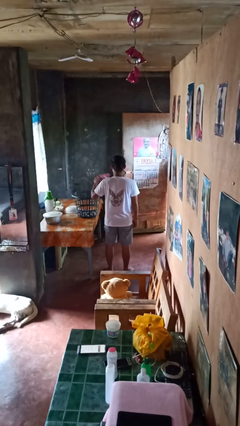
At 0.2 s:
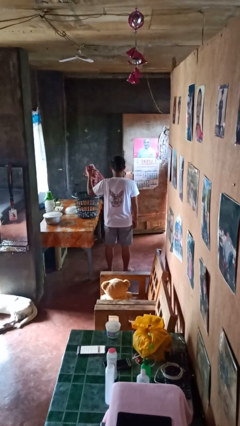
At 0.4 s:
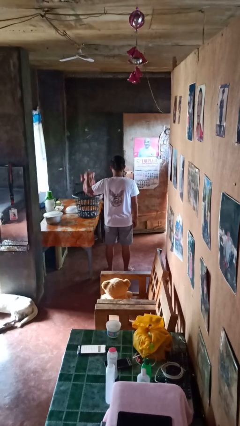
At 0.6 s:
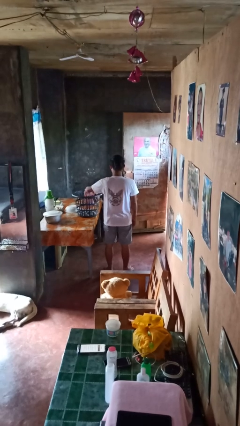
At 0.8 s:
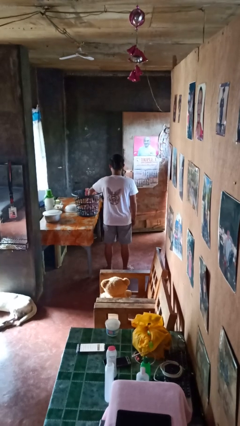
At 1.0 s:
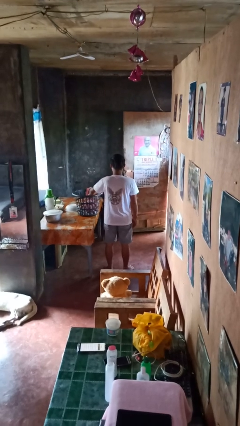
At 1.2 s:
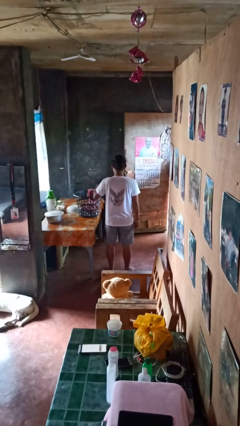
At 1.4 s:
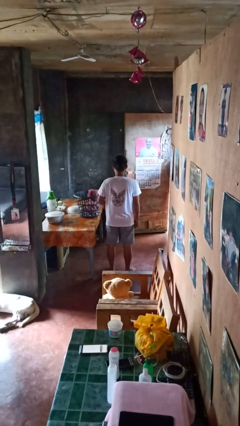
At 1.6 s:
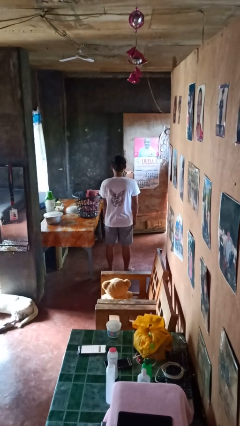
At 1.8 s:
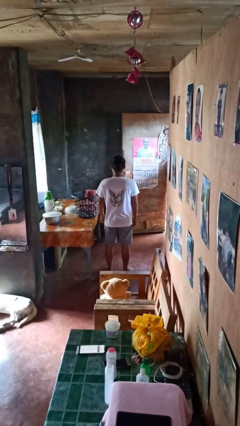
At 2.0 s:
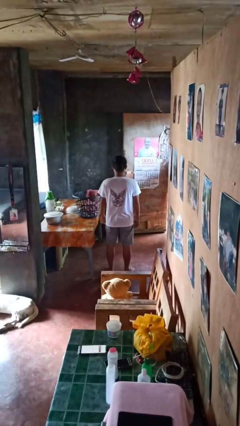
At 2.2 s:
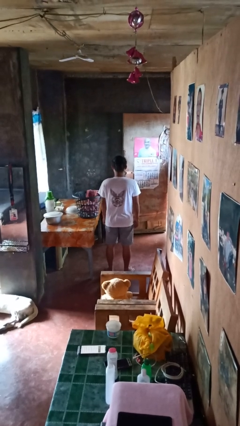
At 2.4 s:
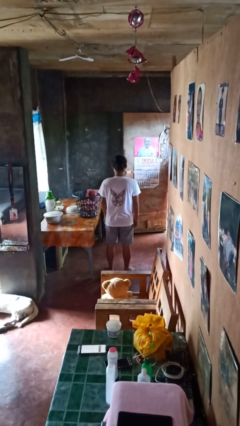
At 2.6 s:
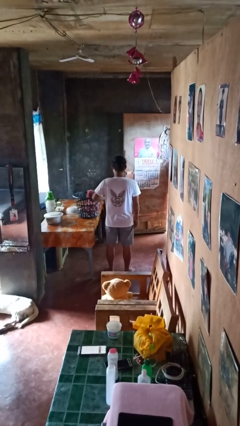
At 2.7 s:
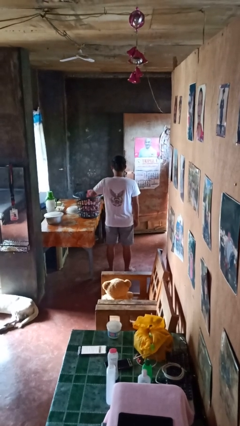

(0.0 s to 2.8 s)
person puts object into basket

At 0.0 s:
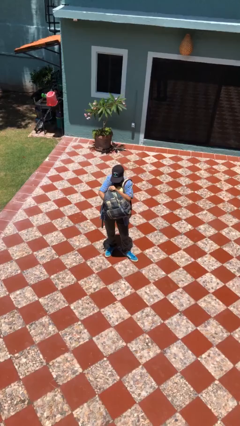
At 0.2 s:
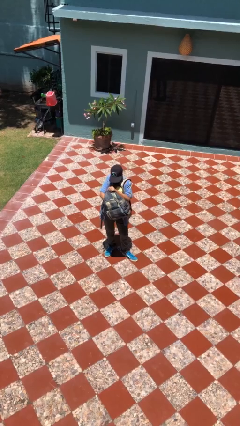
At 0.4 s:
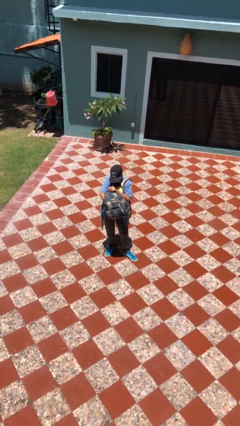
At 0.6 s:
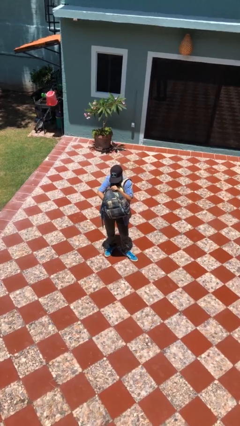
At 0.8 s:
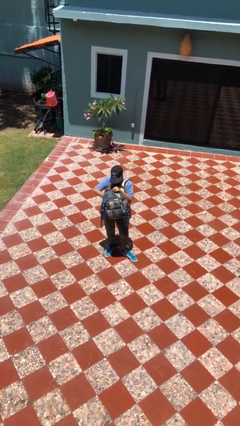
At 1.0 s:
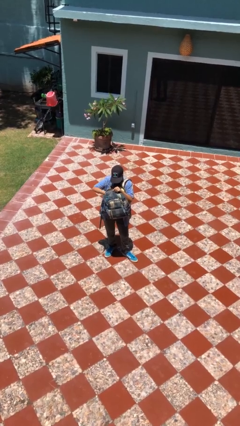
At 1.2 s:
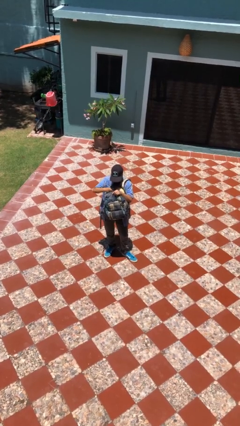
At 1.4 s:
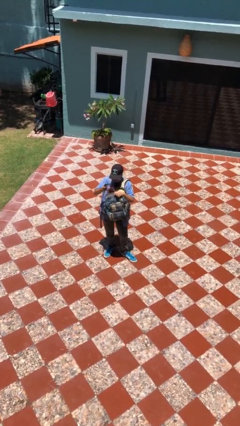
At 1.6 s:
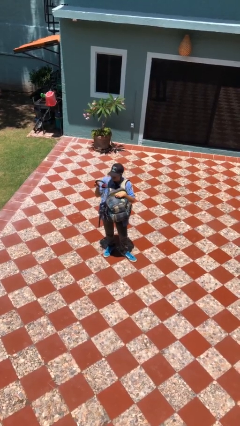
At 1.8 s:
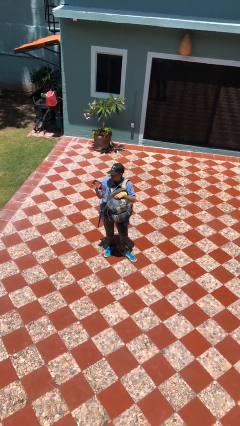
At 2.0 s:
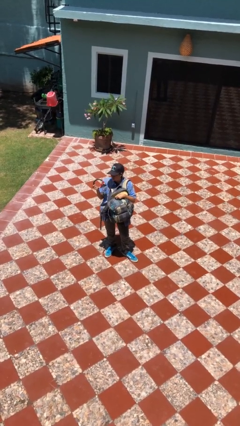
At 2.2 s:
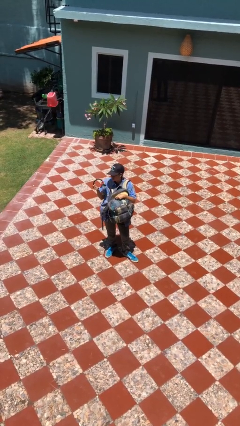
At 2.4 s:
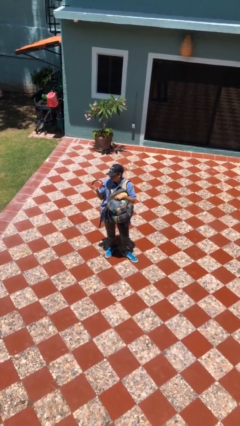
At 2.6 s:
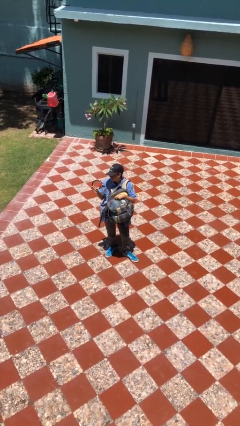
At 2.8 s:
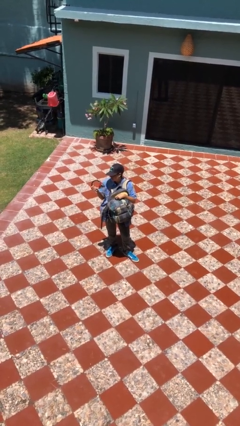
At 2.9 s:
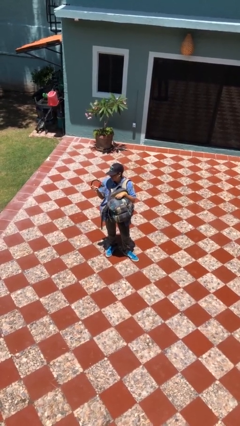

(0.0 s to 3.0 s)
person takes object from backpack

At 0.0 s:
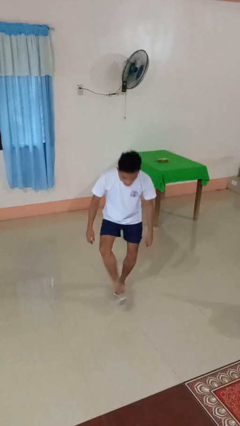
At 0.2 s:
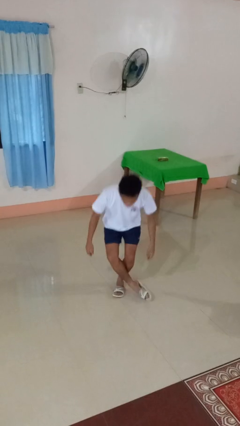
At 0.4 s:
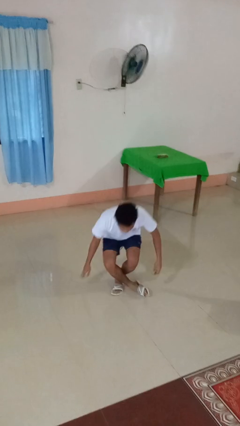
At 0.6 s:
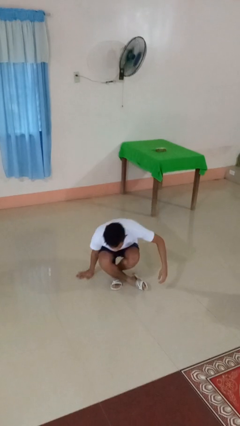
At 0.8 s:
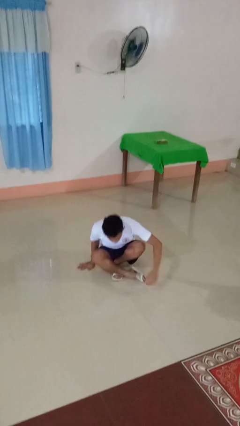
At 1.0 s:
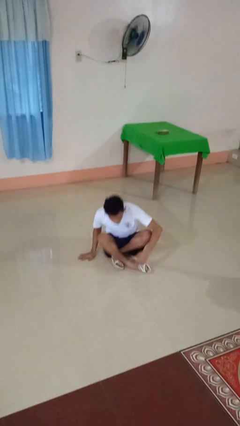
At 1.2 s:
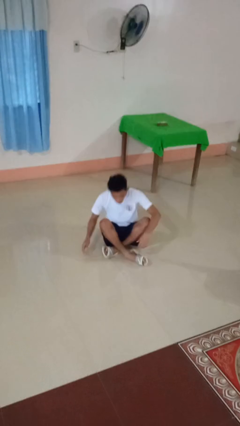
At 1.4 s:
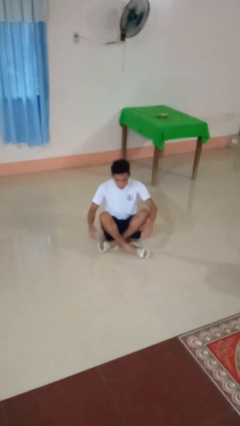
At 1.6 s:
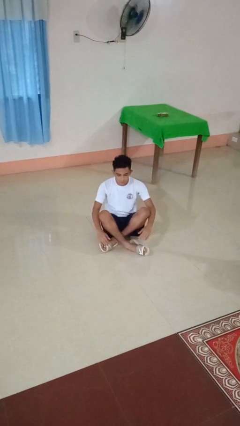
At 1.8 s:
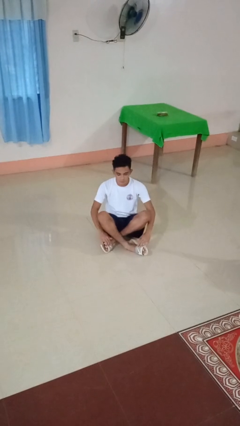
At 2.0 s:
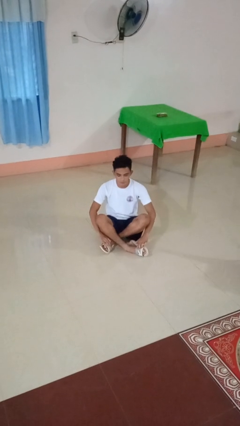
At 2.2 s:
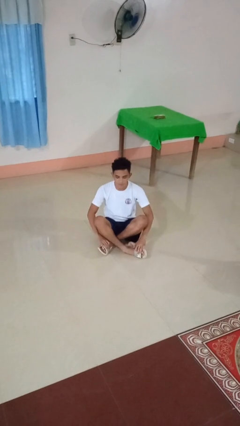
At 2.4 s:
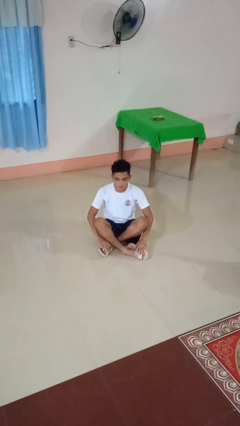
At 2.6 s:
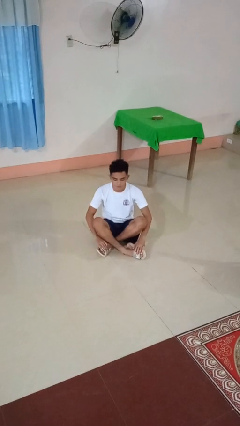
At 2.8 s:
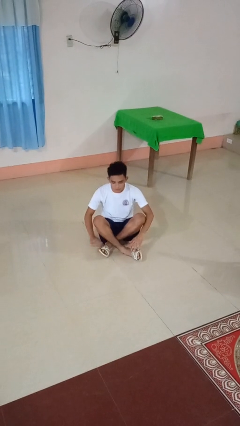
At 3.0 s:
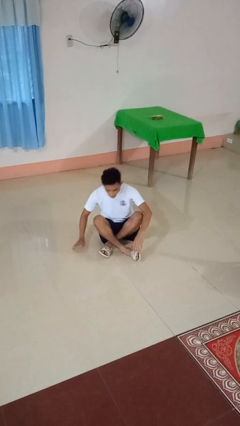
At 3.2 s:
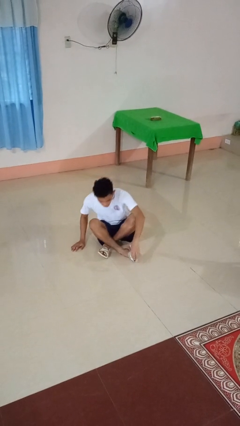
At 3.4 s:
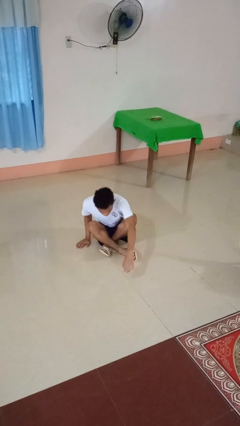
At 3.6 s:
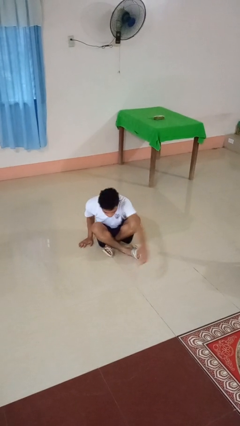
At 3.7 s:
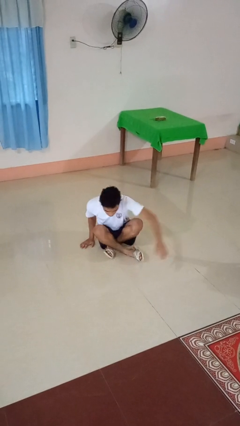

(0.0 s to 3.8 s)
person sits crisscross

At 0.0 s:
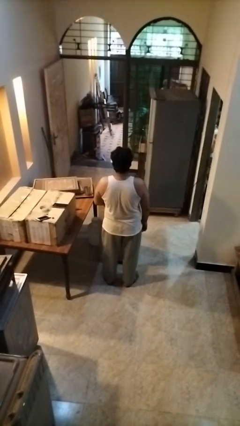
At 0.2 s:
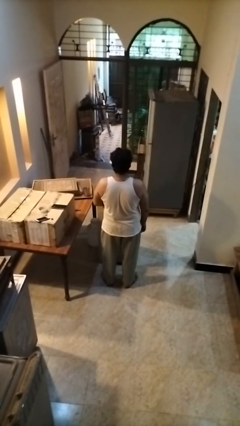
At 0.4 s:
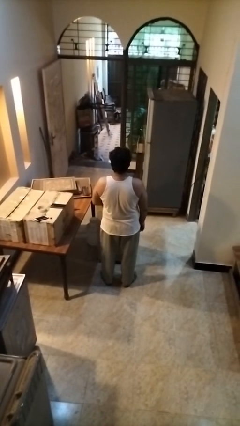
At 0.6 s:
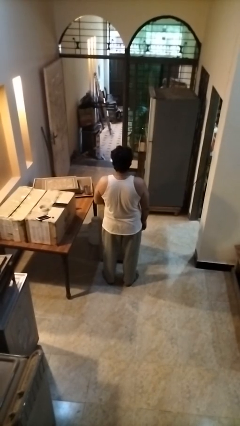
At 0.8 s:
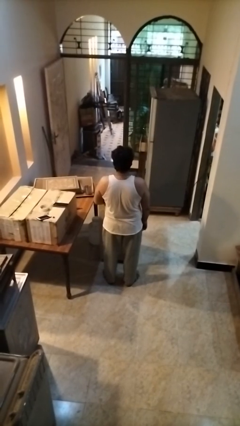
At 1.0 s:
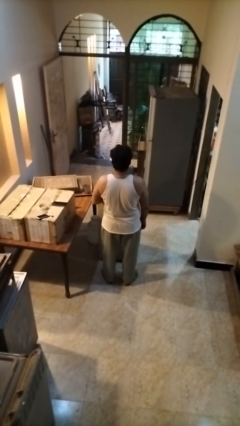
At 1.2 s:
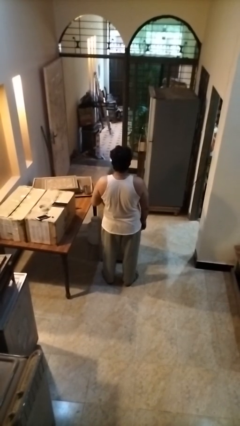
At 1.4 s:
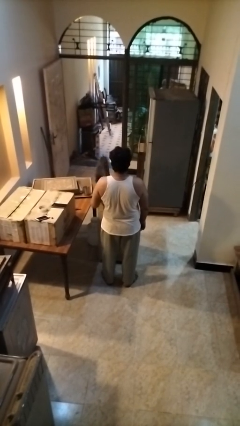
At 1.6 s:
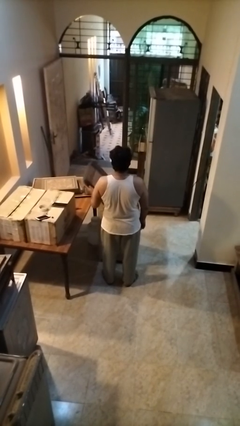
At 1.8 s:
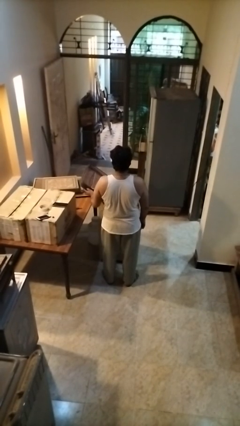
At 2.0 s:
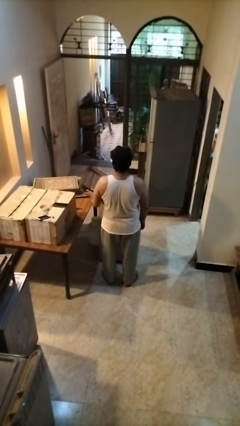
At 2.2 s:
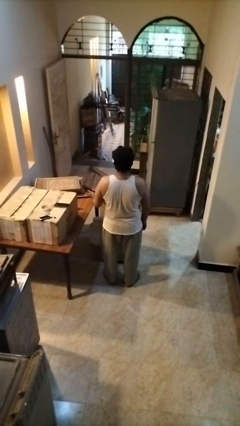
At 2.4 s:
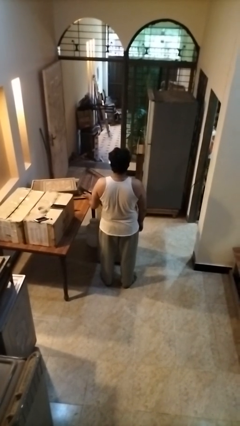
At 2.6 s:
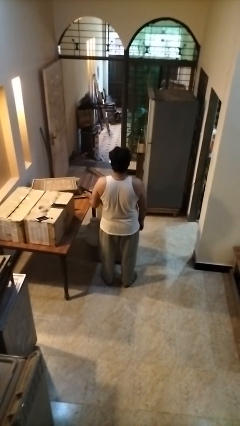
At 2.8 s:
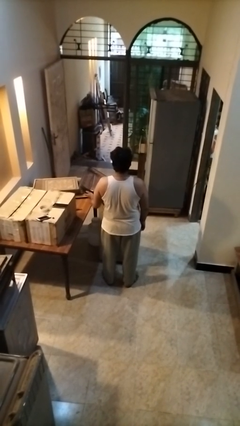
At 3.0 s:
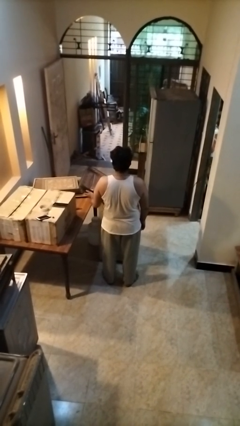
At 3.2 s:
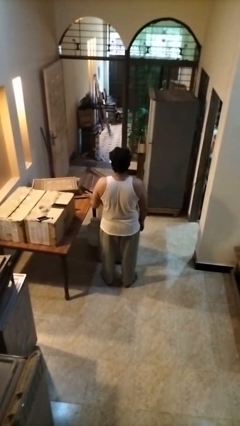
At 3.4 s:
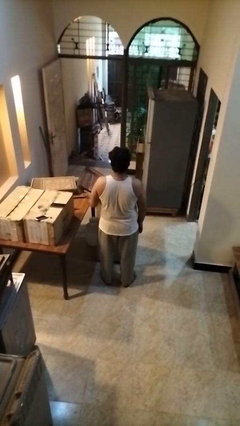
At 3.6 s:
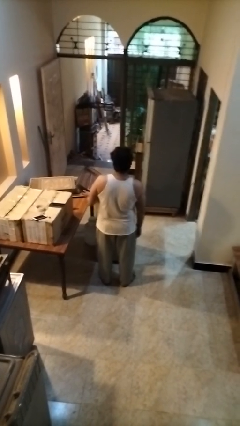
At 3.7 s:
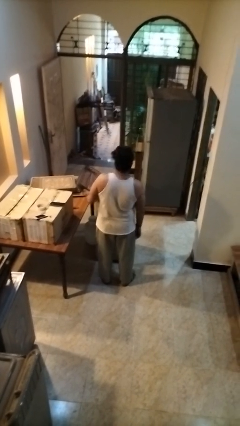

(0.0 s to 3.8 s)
person opens suitcase

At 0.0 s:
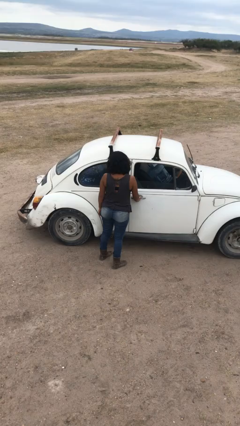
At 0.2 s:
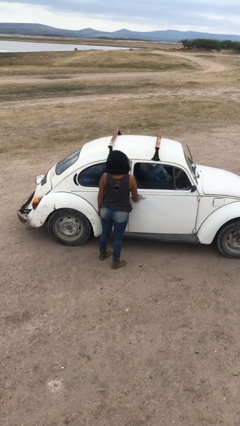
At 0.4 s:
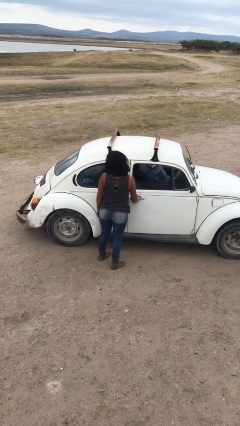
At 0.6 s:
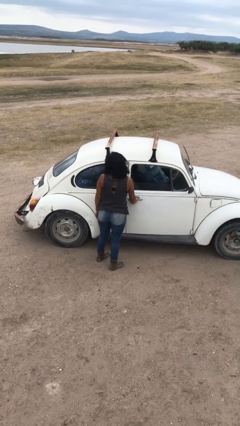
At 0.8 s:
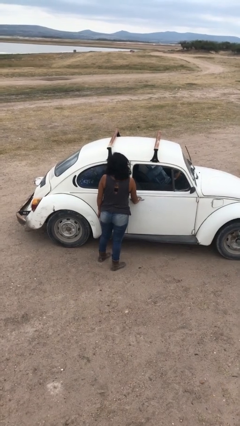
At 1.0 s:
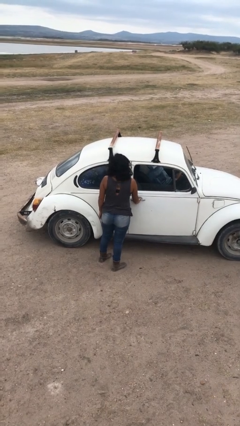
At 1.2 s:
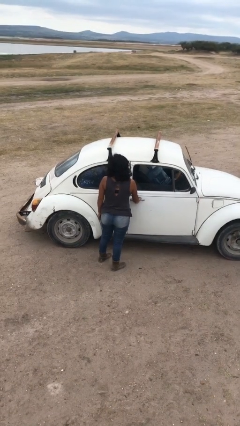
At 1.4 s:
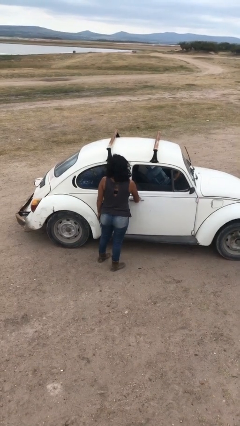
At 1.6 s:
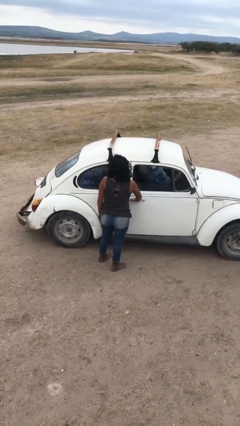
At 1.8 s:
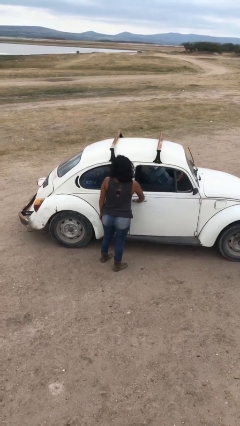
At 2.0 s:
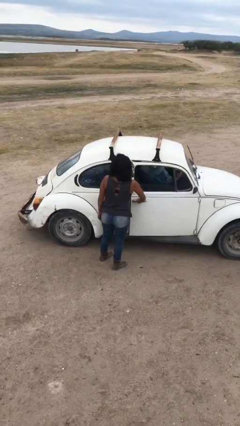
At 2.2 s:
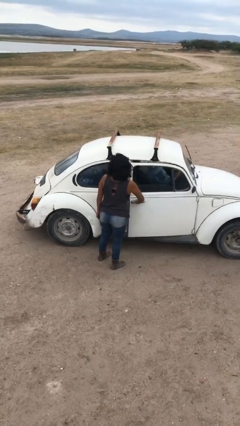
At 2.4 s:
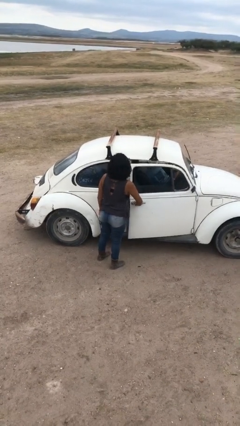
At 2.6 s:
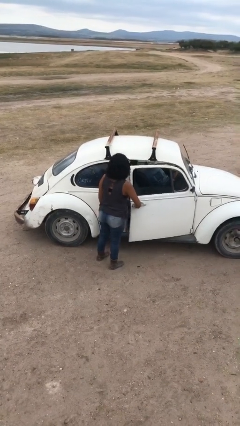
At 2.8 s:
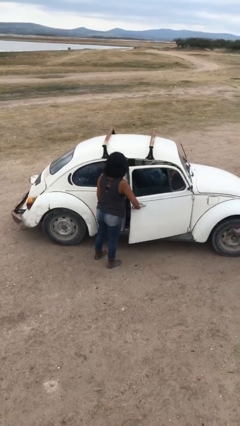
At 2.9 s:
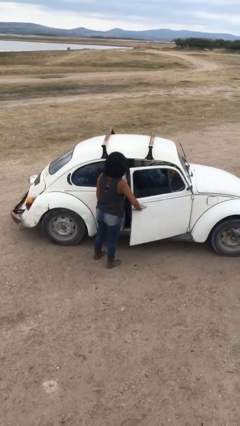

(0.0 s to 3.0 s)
person opens car door

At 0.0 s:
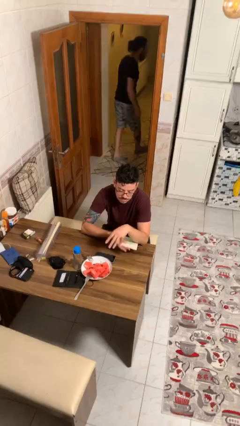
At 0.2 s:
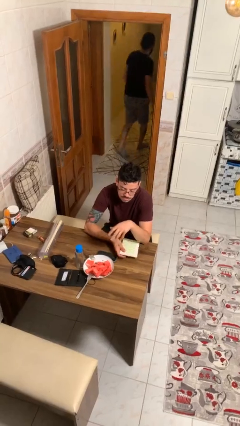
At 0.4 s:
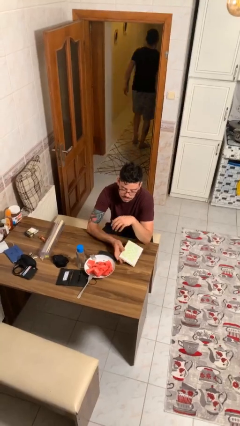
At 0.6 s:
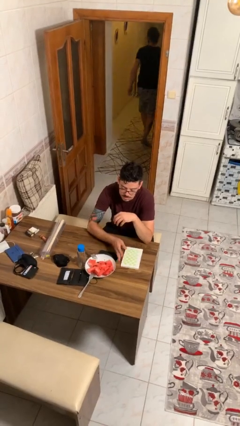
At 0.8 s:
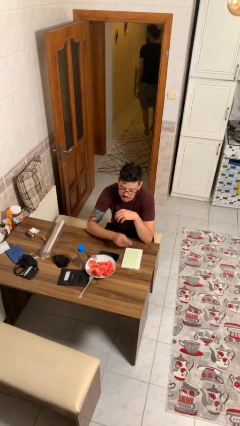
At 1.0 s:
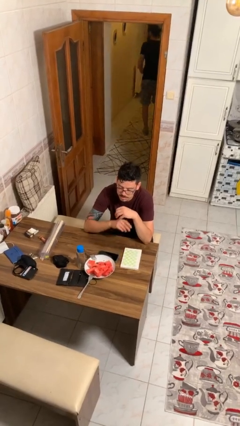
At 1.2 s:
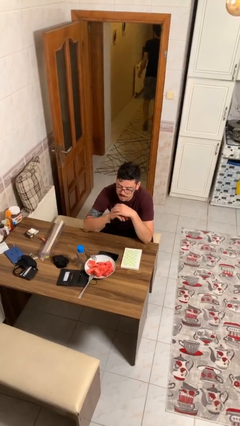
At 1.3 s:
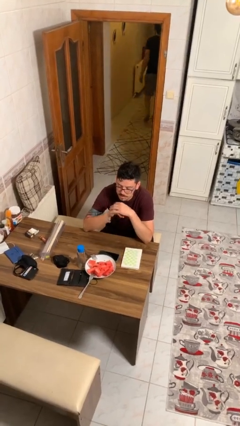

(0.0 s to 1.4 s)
person puts down object on table
